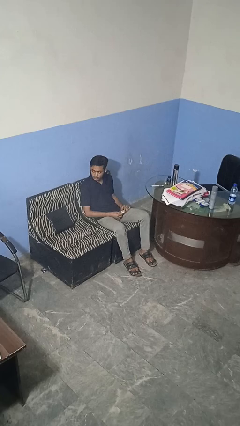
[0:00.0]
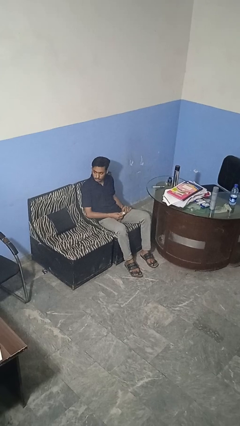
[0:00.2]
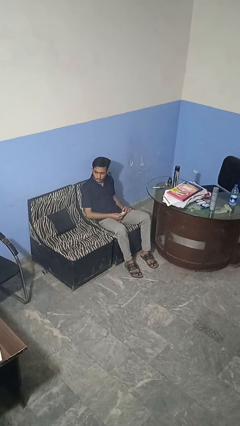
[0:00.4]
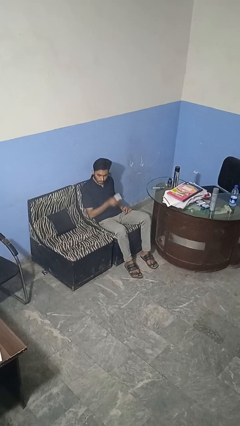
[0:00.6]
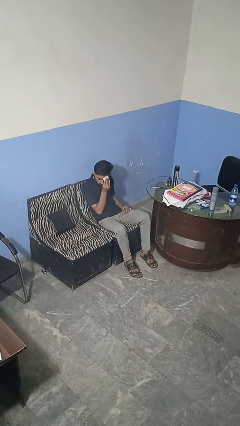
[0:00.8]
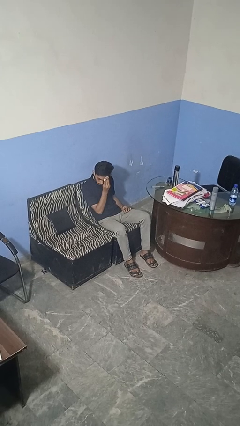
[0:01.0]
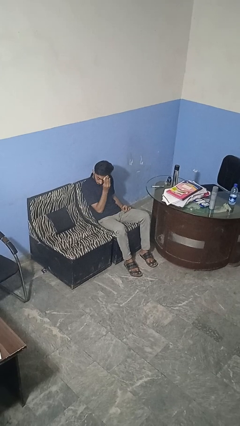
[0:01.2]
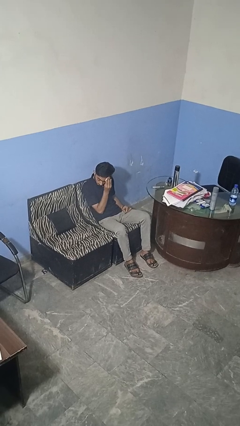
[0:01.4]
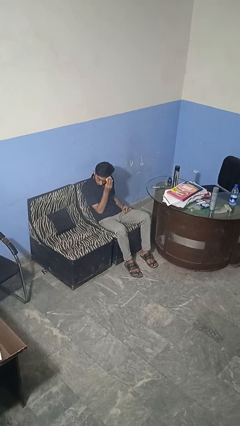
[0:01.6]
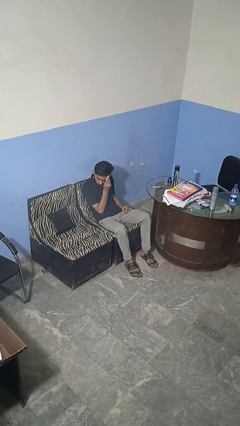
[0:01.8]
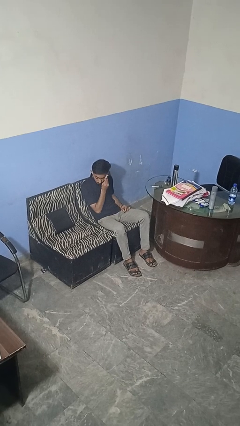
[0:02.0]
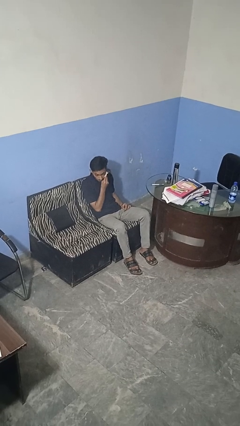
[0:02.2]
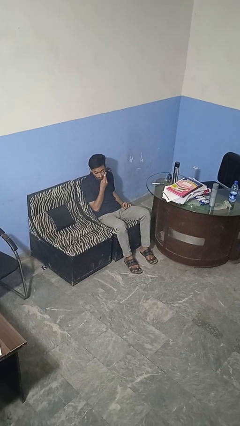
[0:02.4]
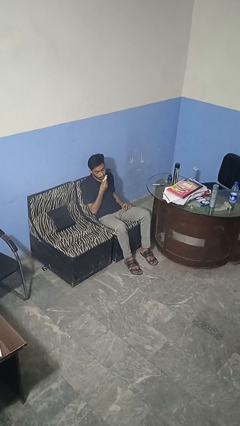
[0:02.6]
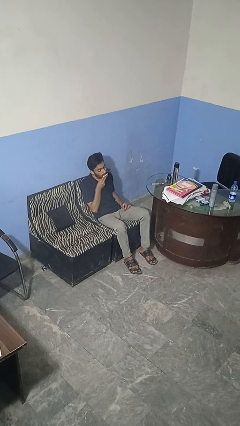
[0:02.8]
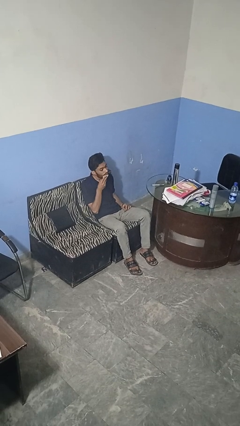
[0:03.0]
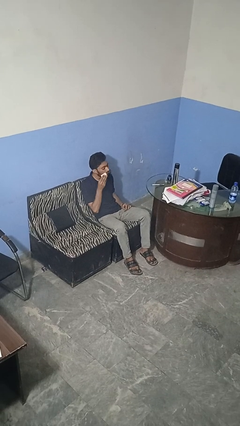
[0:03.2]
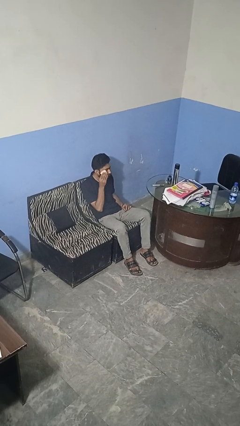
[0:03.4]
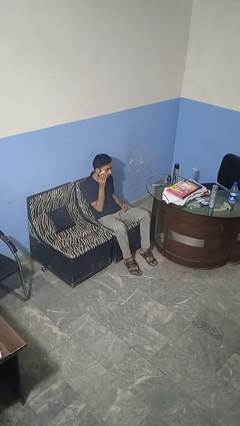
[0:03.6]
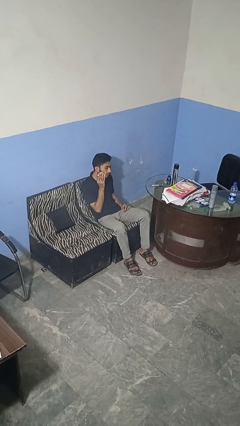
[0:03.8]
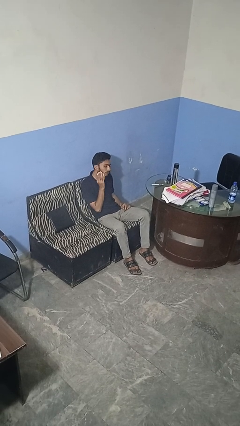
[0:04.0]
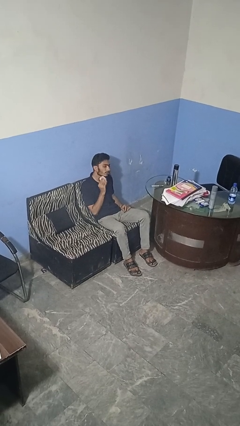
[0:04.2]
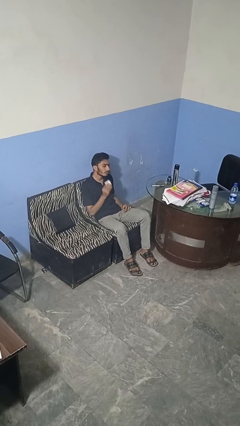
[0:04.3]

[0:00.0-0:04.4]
person wipes mouth with napkin

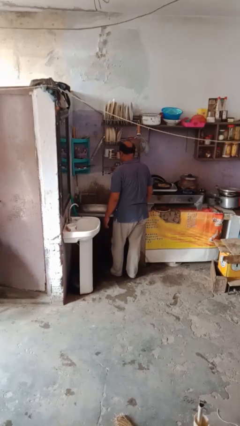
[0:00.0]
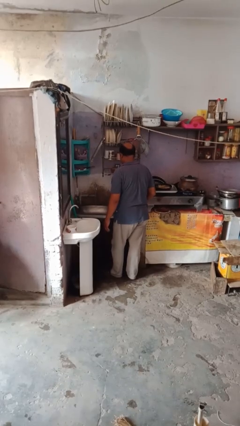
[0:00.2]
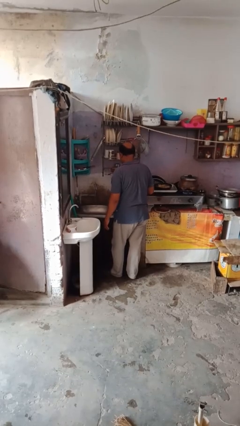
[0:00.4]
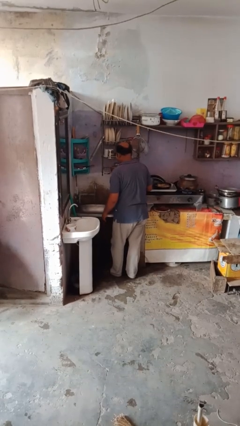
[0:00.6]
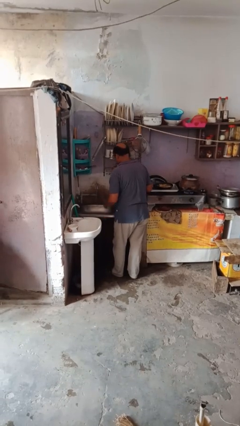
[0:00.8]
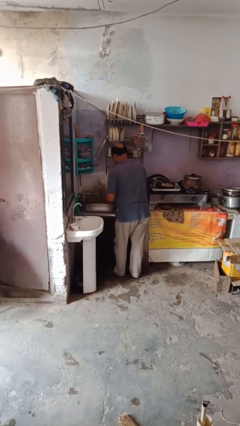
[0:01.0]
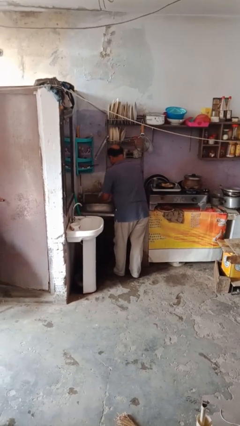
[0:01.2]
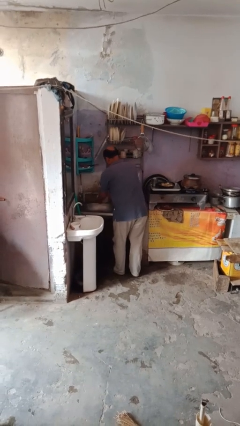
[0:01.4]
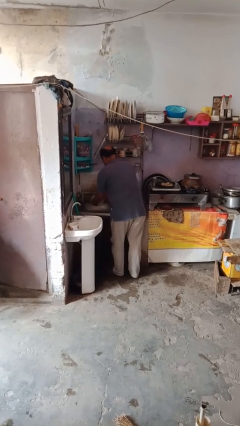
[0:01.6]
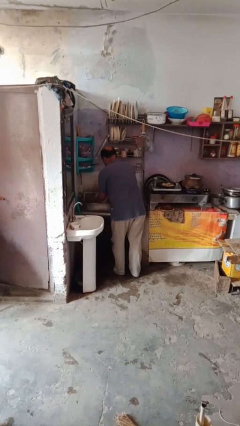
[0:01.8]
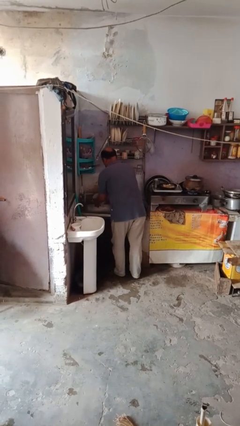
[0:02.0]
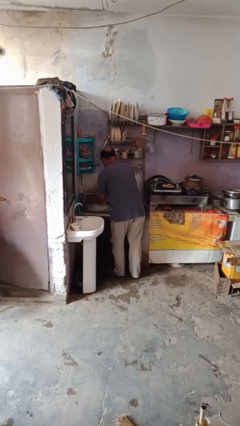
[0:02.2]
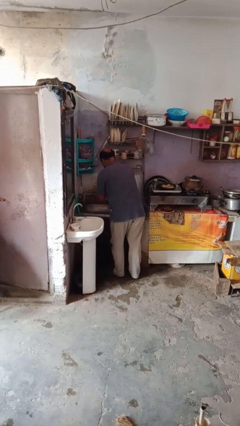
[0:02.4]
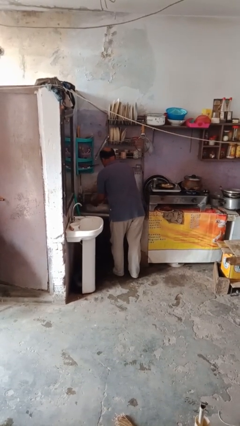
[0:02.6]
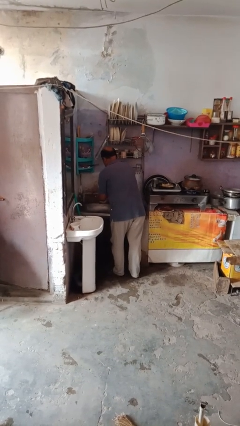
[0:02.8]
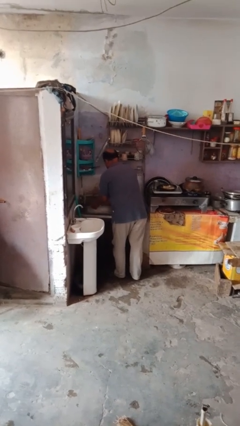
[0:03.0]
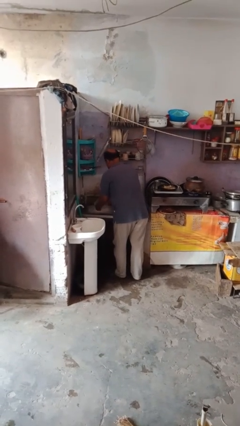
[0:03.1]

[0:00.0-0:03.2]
person washes dish

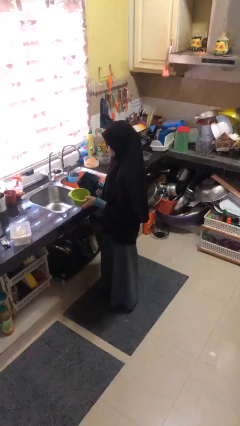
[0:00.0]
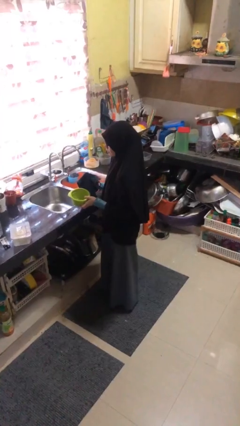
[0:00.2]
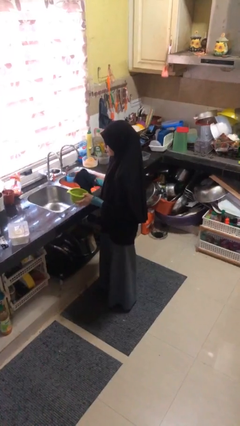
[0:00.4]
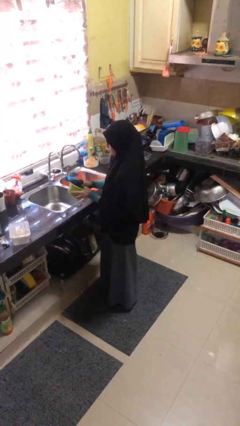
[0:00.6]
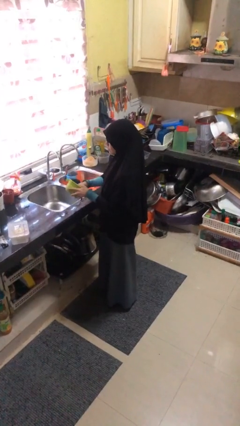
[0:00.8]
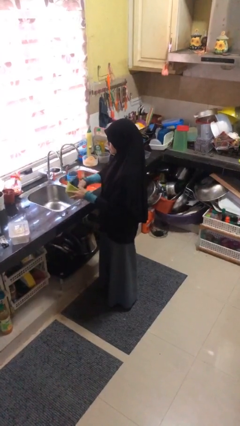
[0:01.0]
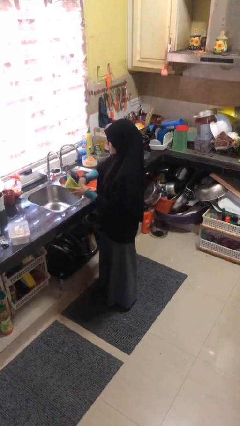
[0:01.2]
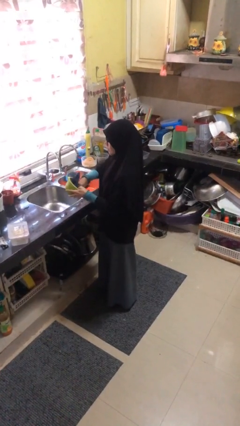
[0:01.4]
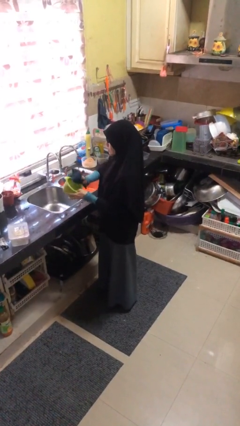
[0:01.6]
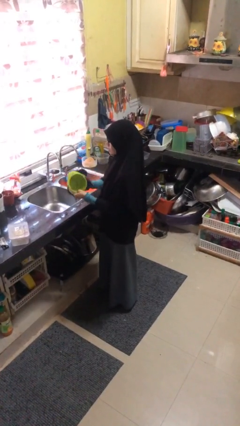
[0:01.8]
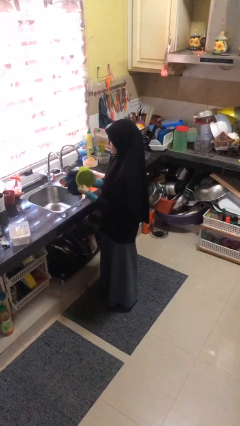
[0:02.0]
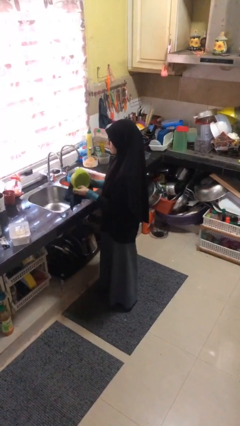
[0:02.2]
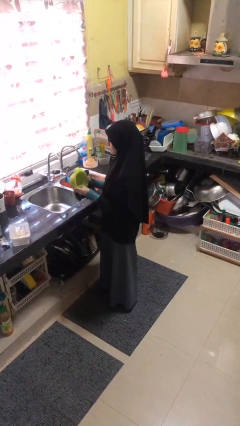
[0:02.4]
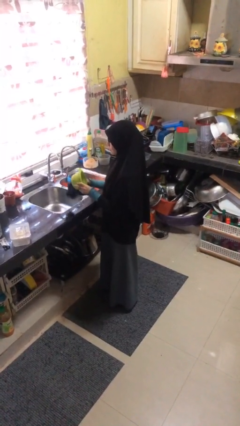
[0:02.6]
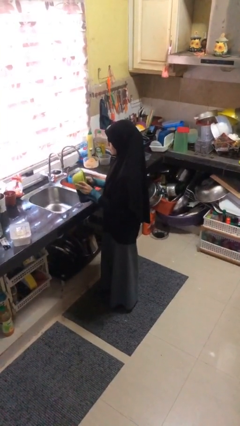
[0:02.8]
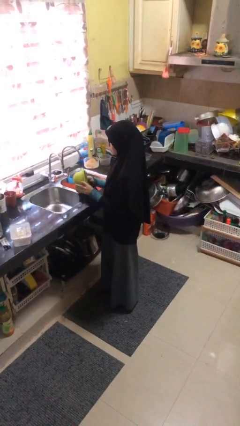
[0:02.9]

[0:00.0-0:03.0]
person dries dish

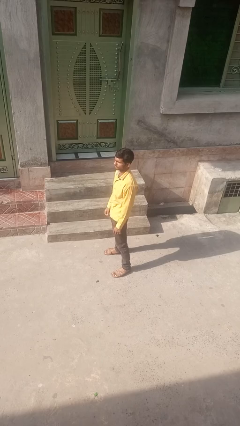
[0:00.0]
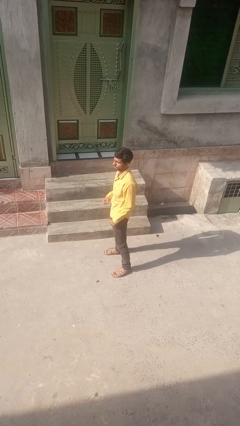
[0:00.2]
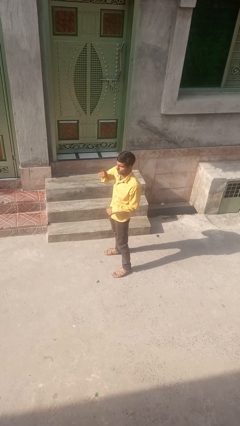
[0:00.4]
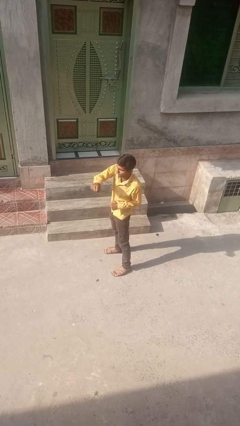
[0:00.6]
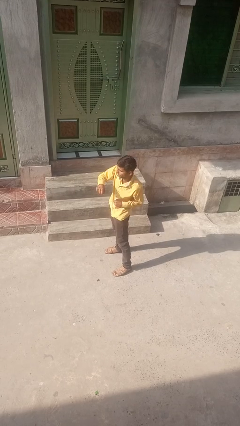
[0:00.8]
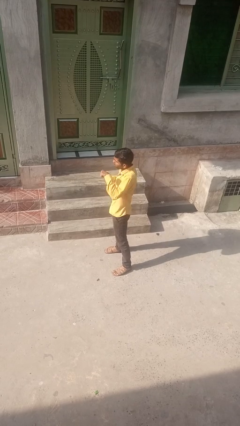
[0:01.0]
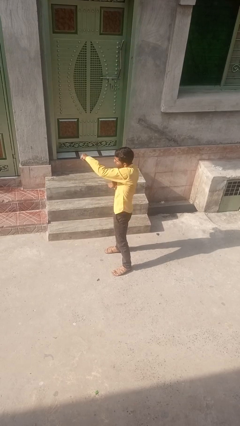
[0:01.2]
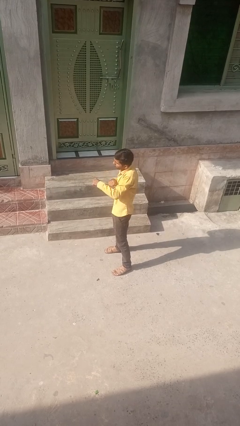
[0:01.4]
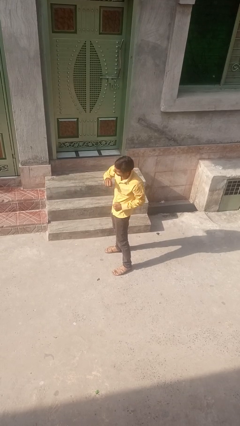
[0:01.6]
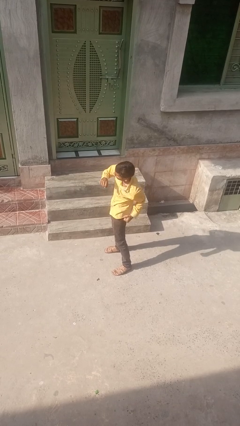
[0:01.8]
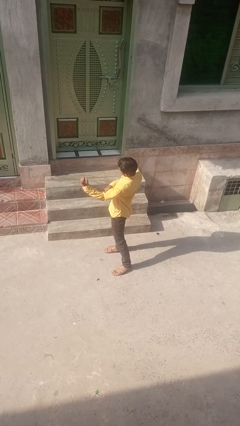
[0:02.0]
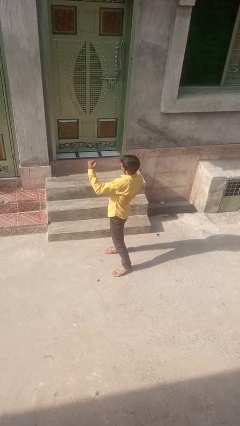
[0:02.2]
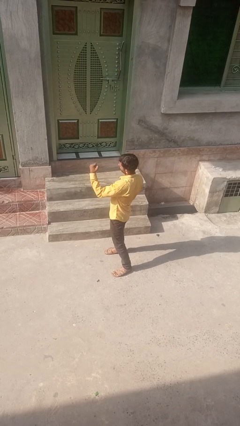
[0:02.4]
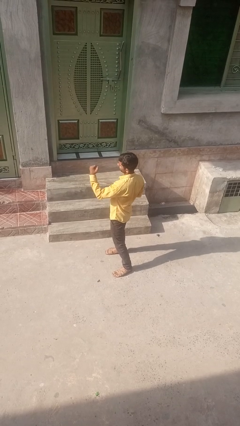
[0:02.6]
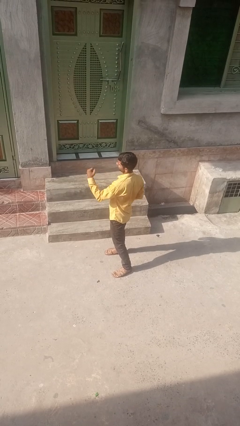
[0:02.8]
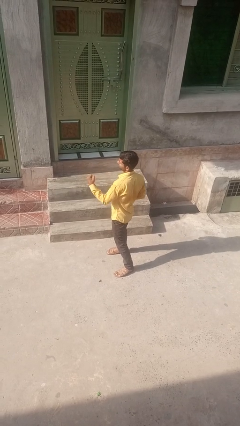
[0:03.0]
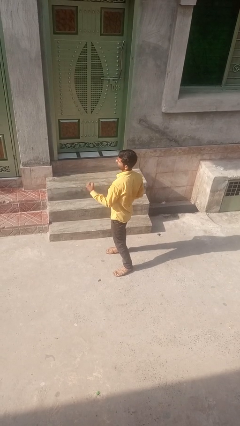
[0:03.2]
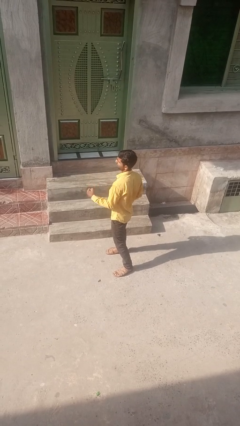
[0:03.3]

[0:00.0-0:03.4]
person punches

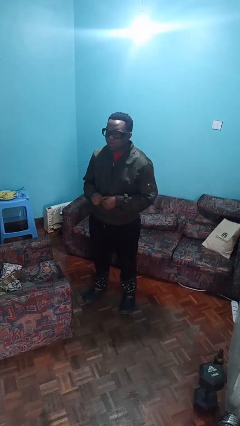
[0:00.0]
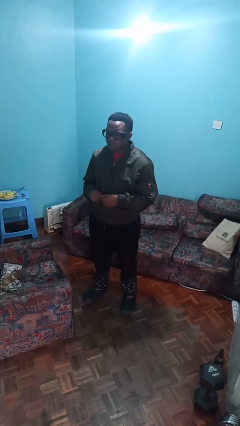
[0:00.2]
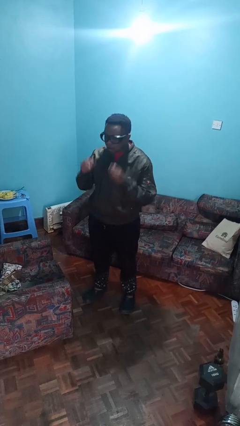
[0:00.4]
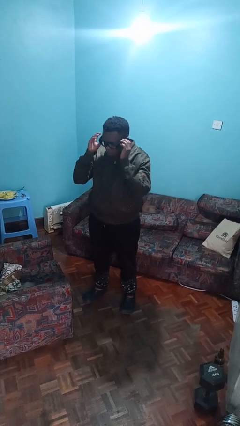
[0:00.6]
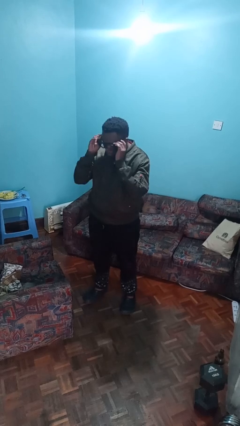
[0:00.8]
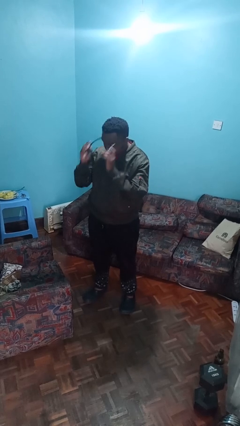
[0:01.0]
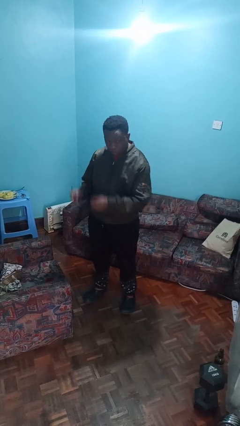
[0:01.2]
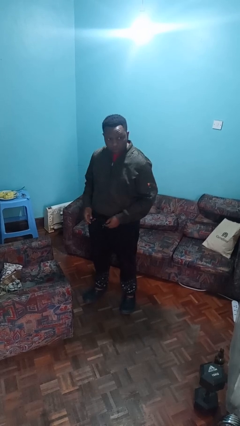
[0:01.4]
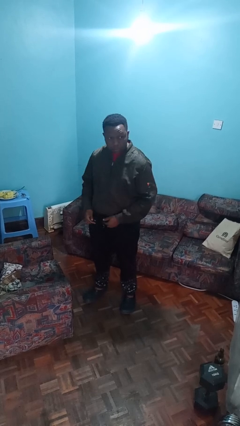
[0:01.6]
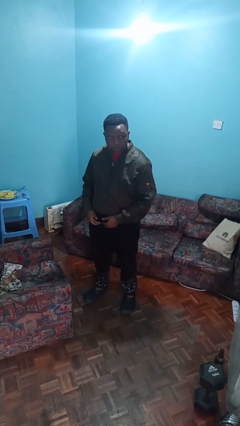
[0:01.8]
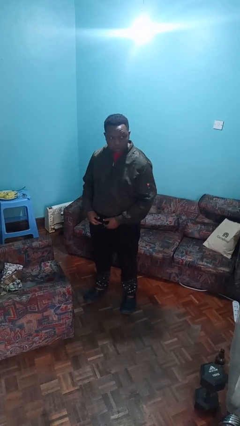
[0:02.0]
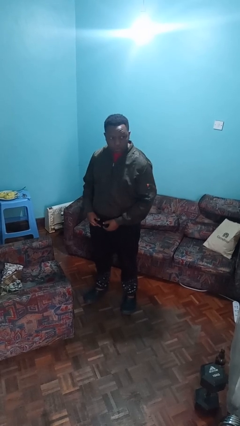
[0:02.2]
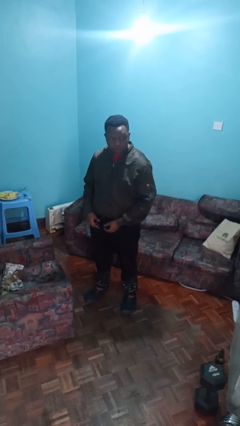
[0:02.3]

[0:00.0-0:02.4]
person takes off glasses

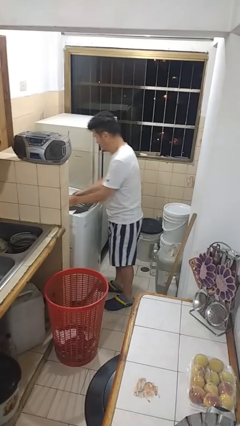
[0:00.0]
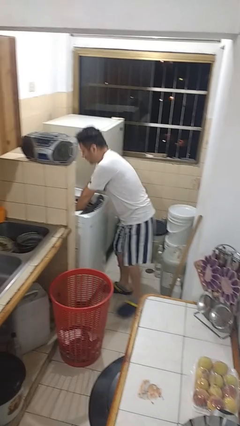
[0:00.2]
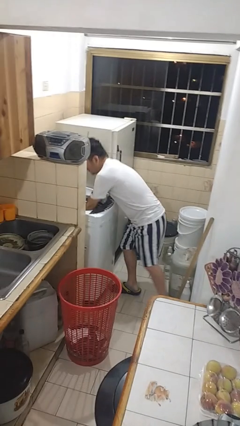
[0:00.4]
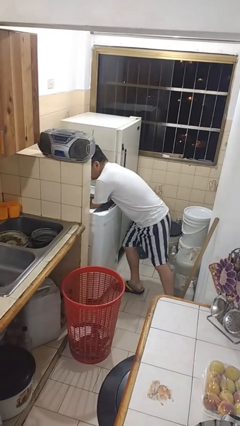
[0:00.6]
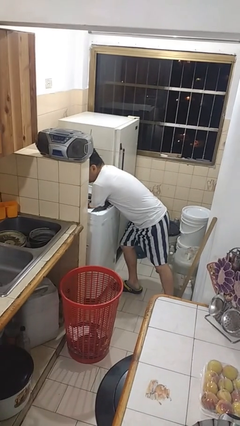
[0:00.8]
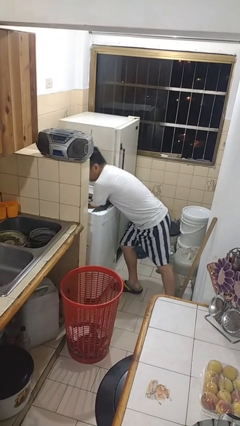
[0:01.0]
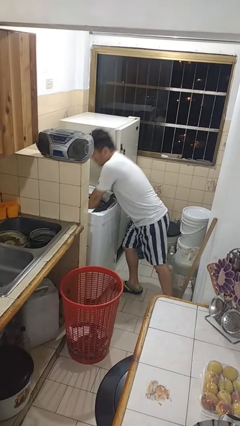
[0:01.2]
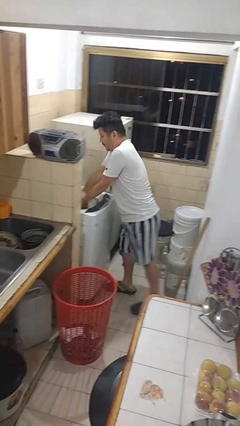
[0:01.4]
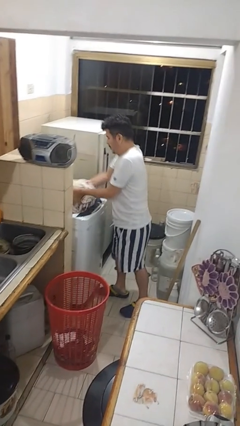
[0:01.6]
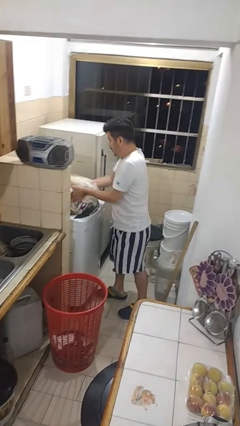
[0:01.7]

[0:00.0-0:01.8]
person unloads clotheswasher
